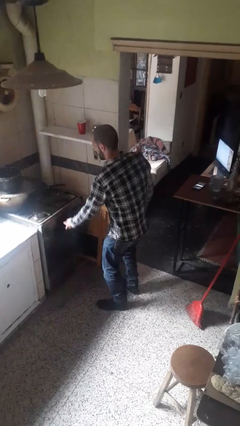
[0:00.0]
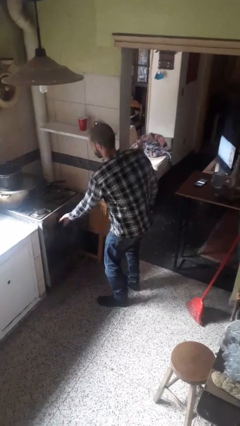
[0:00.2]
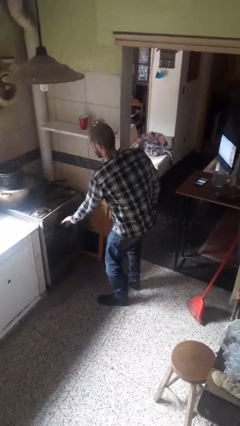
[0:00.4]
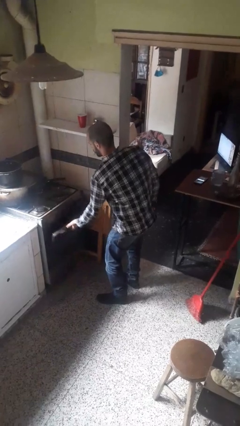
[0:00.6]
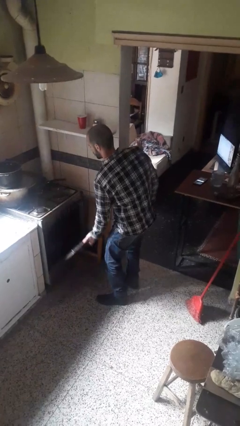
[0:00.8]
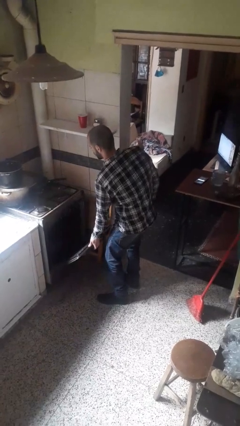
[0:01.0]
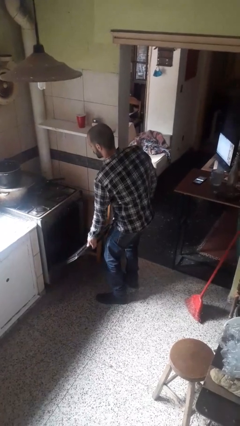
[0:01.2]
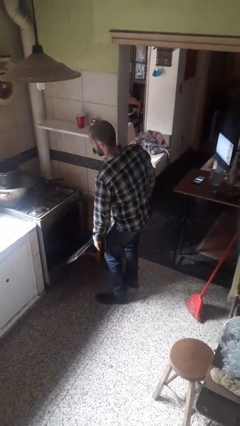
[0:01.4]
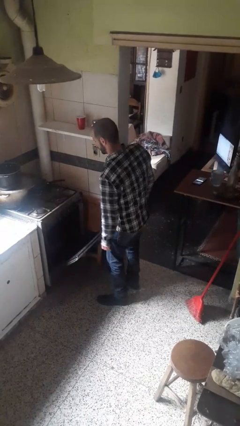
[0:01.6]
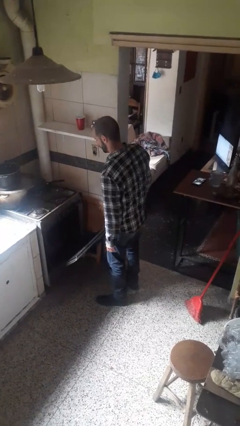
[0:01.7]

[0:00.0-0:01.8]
person opens oven door

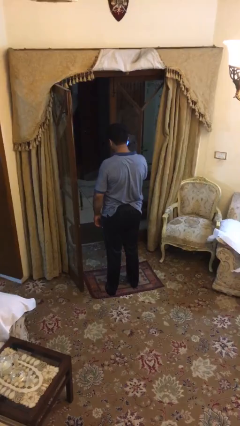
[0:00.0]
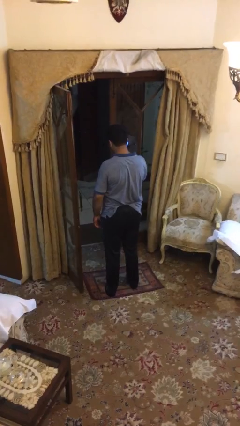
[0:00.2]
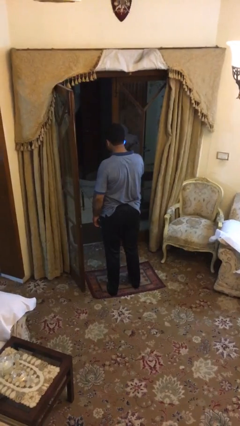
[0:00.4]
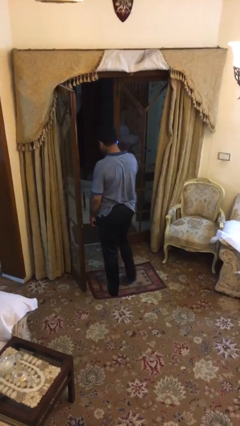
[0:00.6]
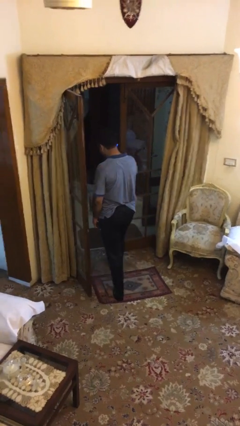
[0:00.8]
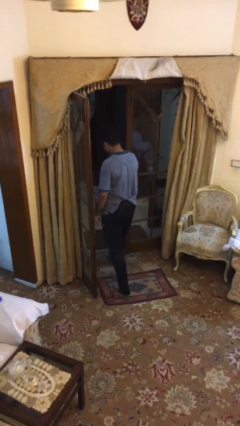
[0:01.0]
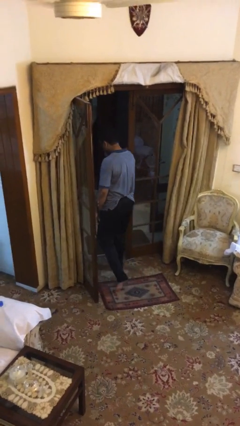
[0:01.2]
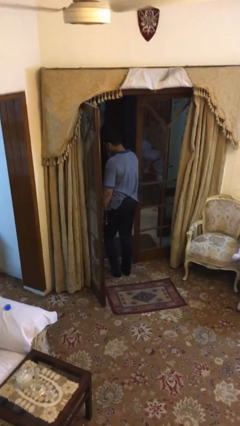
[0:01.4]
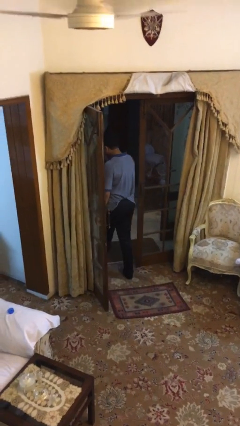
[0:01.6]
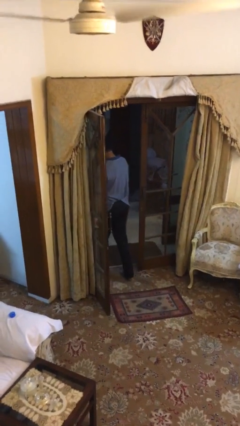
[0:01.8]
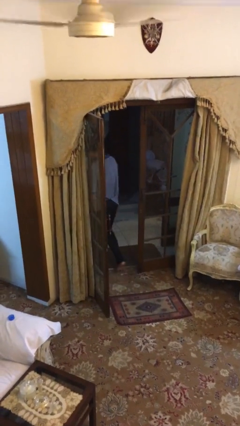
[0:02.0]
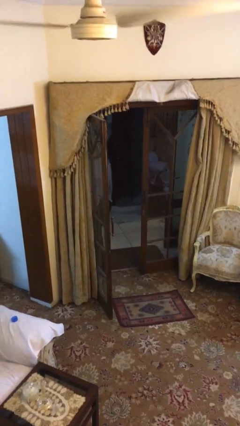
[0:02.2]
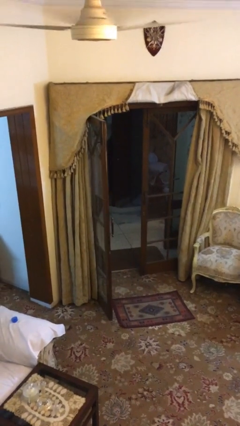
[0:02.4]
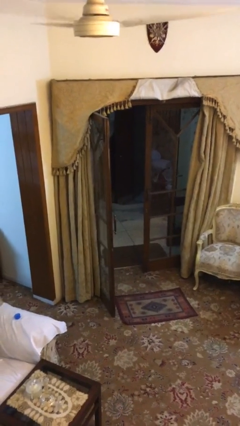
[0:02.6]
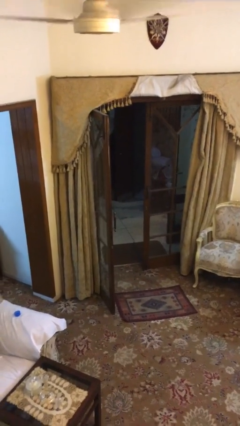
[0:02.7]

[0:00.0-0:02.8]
person exits scene through structure

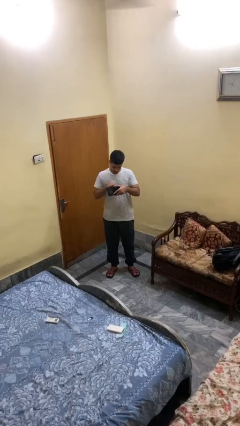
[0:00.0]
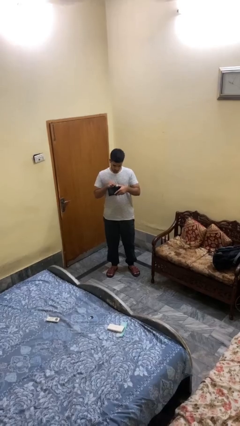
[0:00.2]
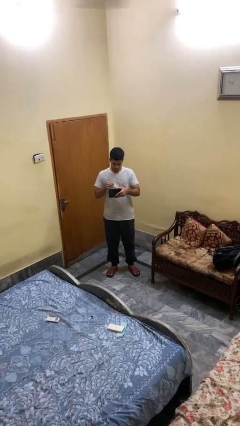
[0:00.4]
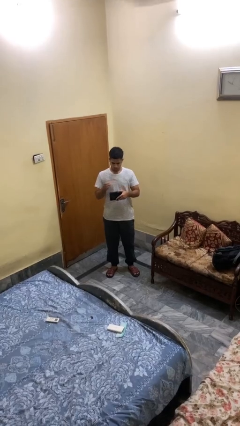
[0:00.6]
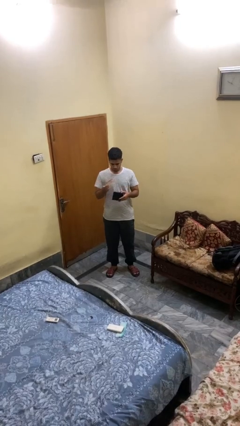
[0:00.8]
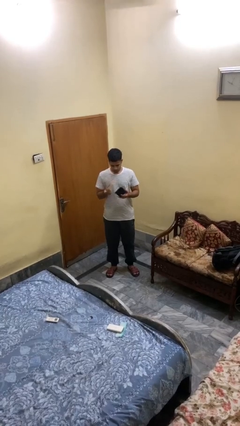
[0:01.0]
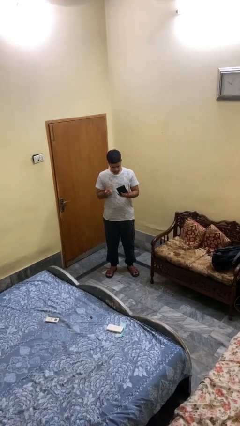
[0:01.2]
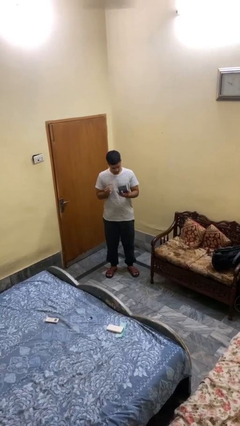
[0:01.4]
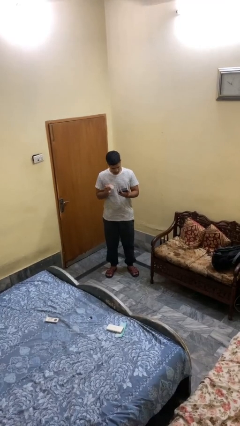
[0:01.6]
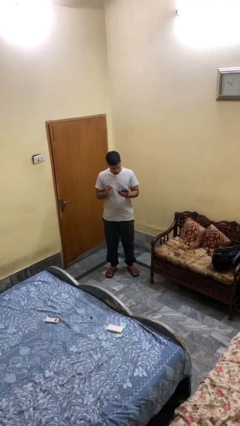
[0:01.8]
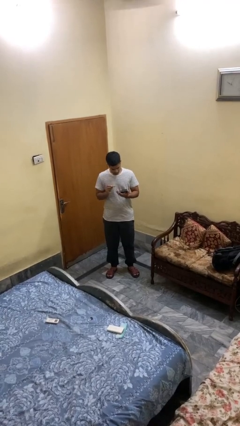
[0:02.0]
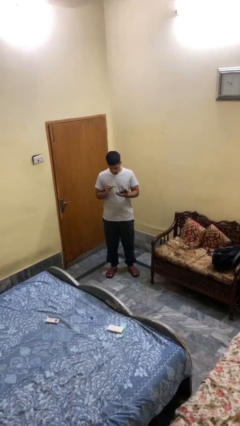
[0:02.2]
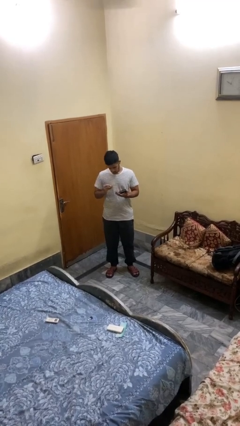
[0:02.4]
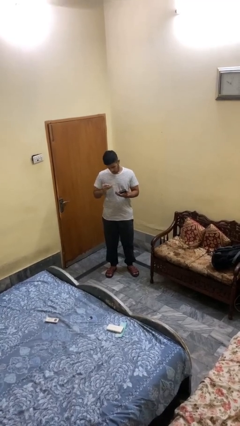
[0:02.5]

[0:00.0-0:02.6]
person takes object from purse

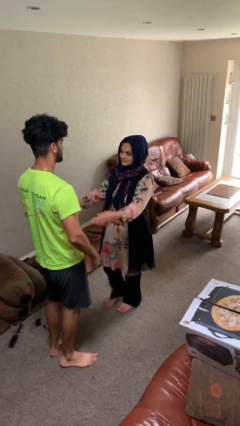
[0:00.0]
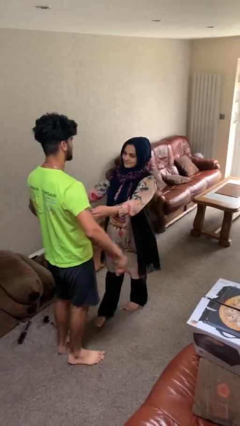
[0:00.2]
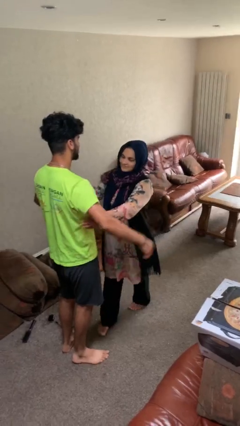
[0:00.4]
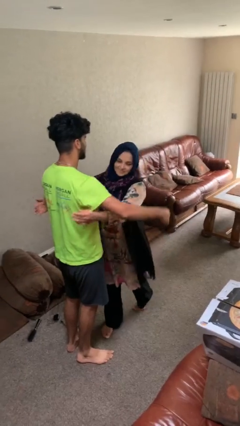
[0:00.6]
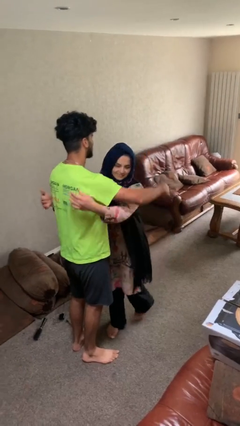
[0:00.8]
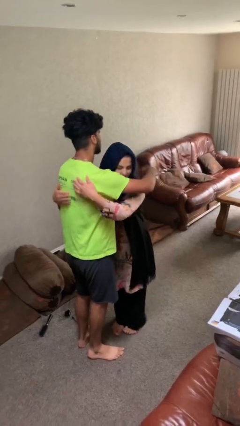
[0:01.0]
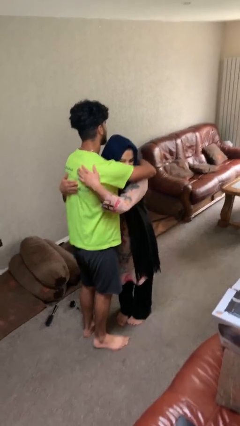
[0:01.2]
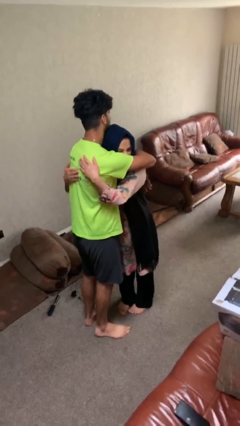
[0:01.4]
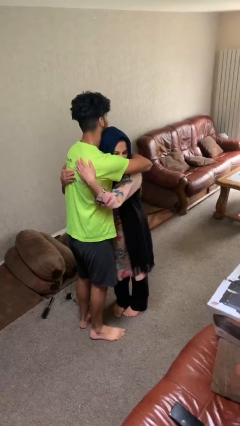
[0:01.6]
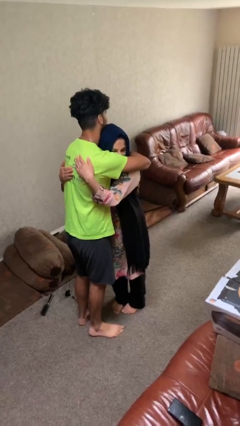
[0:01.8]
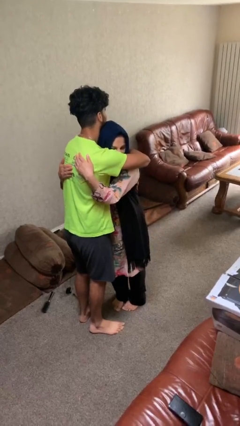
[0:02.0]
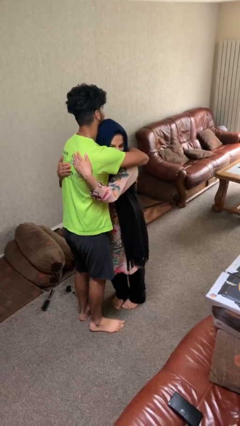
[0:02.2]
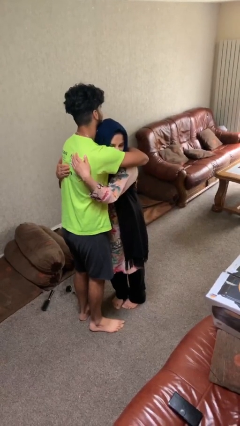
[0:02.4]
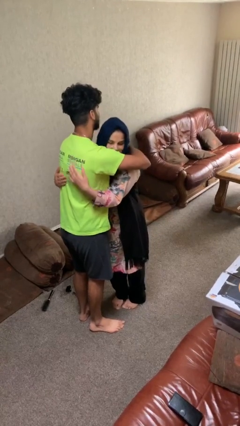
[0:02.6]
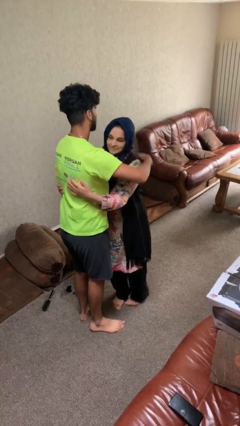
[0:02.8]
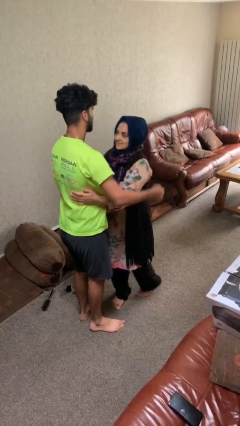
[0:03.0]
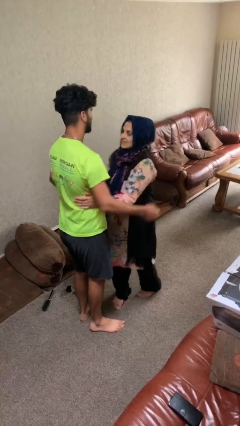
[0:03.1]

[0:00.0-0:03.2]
person embraces person

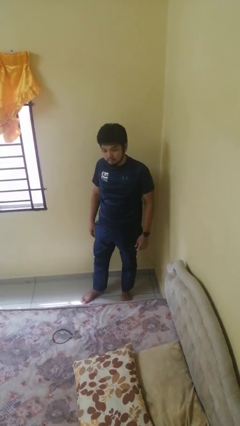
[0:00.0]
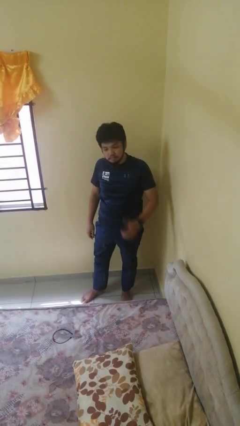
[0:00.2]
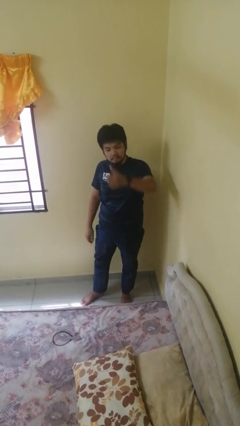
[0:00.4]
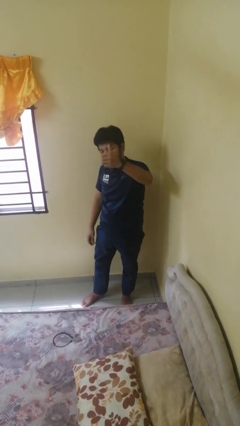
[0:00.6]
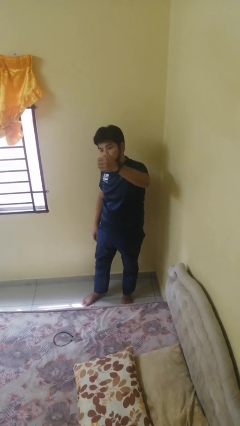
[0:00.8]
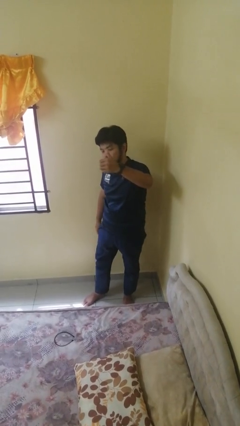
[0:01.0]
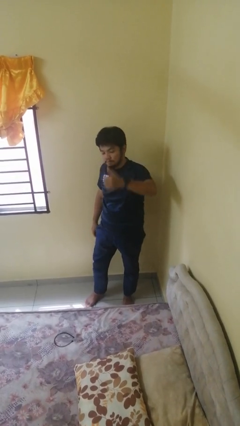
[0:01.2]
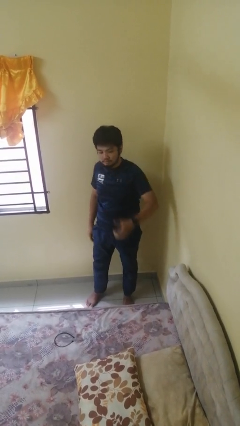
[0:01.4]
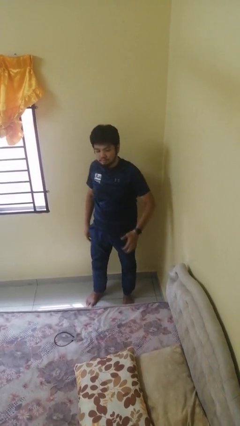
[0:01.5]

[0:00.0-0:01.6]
person gestures thumbs up

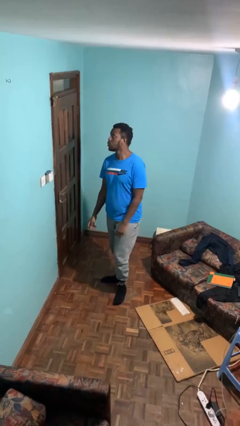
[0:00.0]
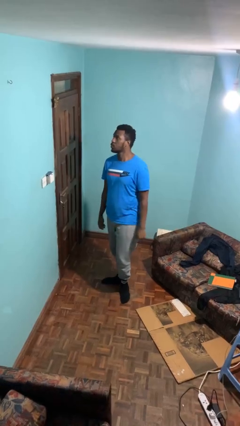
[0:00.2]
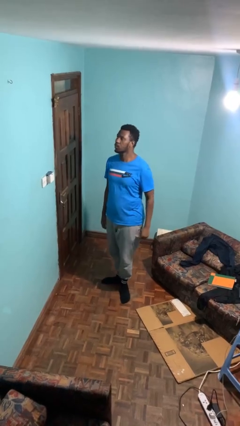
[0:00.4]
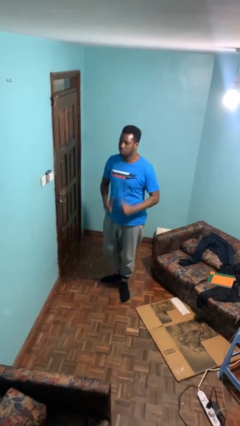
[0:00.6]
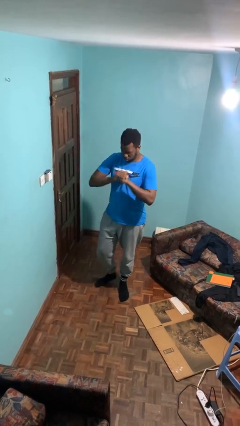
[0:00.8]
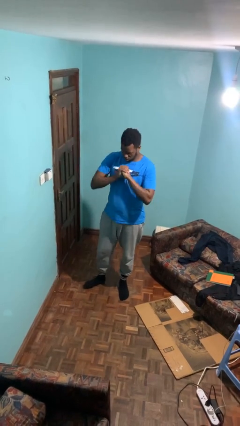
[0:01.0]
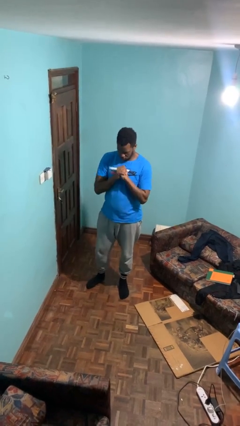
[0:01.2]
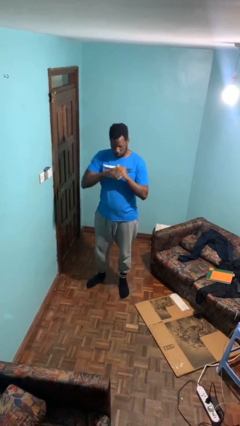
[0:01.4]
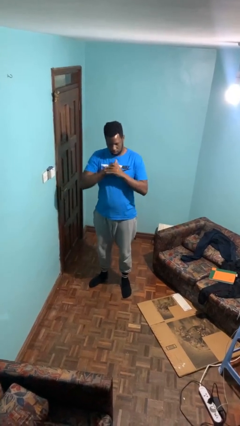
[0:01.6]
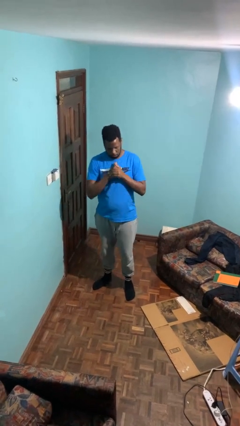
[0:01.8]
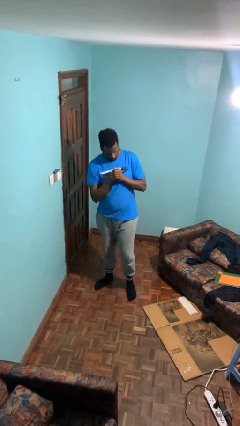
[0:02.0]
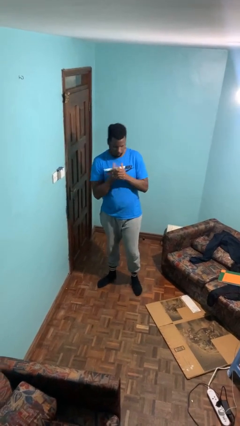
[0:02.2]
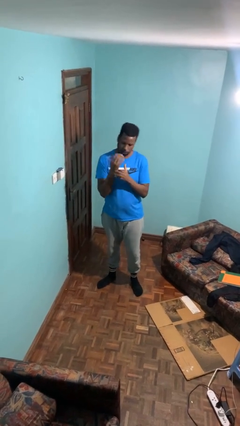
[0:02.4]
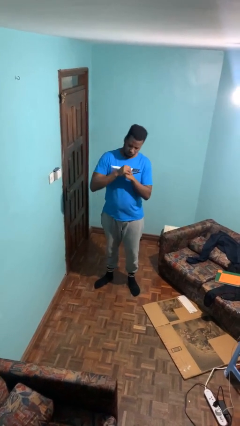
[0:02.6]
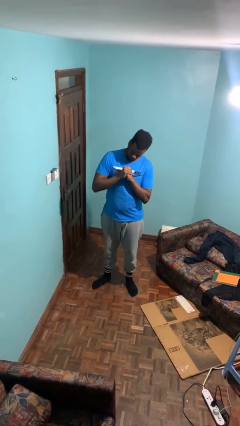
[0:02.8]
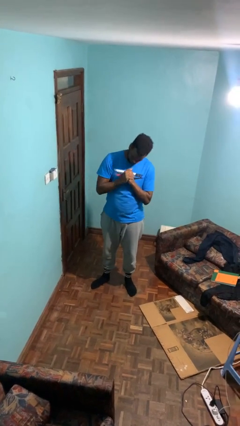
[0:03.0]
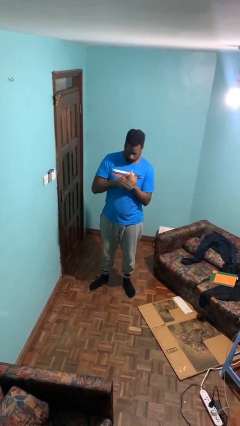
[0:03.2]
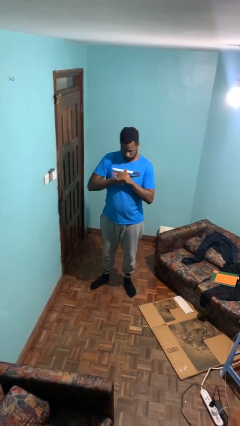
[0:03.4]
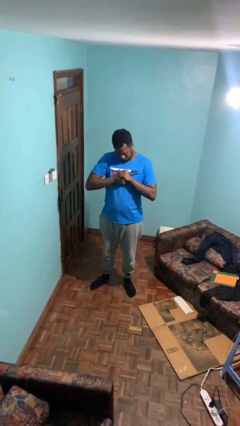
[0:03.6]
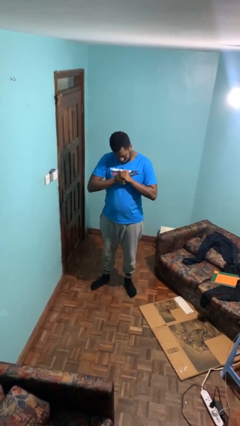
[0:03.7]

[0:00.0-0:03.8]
person cracks knuckles

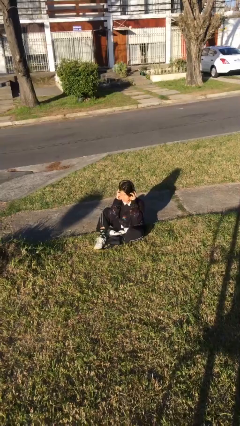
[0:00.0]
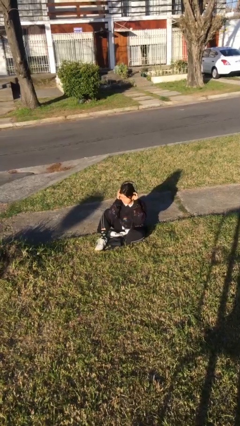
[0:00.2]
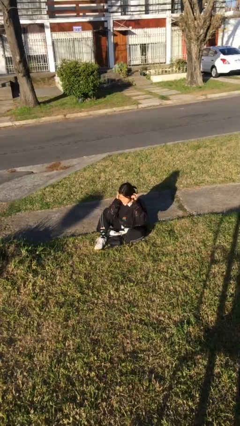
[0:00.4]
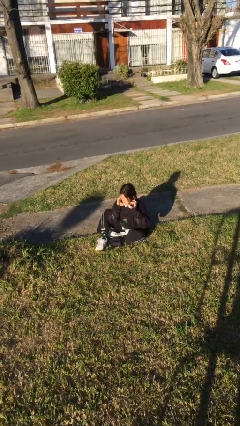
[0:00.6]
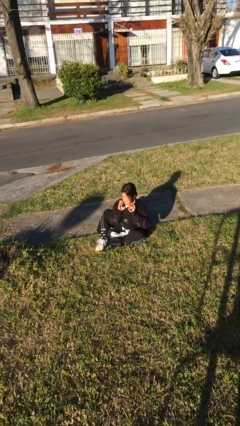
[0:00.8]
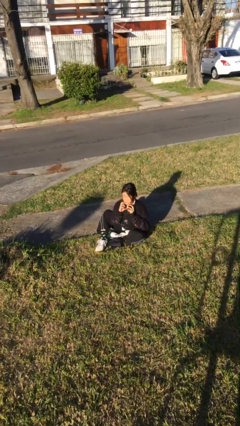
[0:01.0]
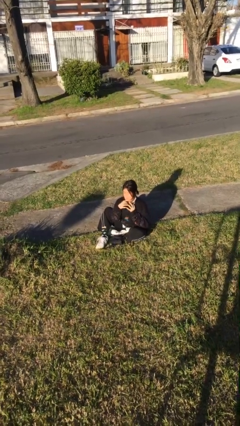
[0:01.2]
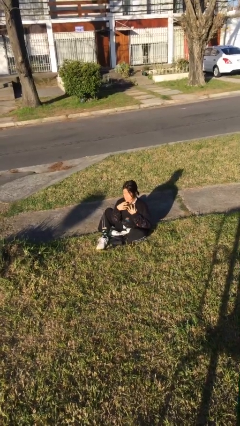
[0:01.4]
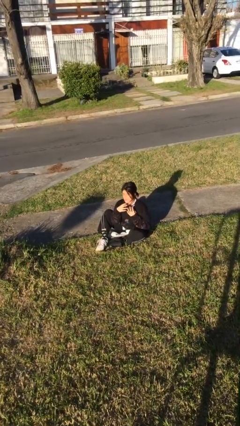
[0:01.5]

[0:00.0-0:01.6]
person takes off headphones
